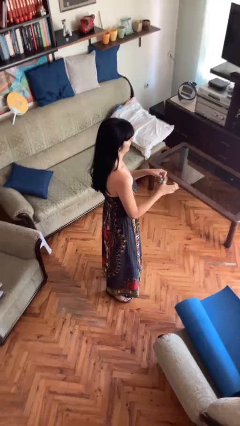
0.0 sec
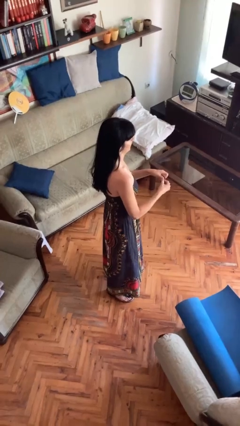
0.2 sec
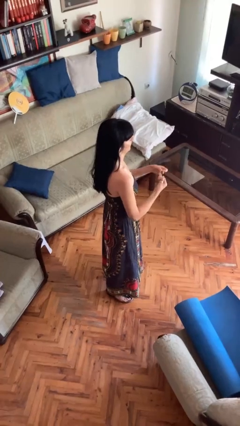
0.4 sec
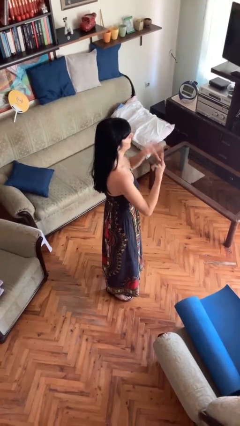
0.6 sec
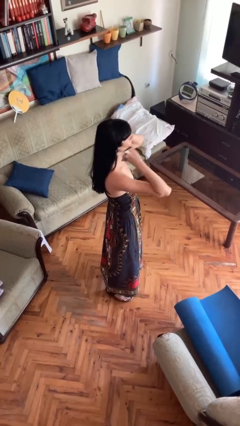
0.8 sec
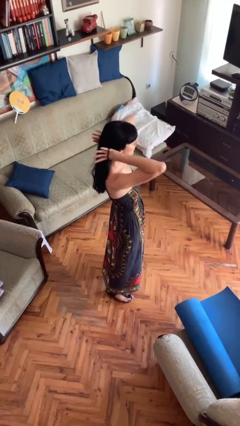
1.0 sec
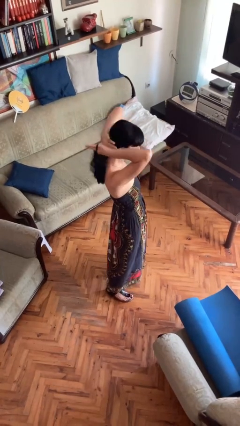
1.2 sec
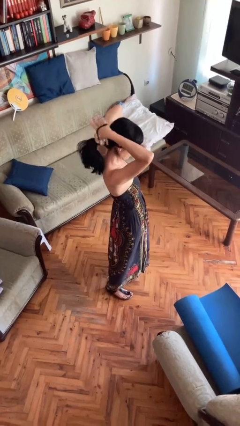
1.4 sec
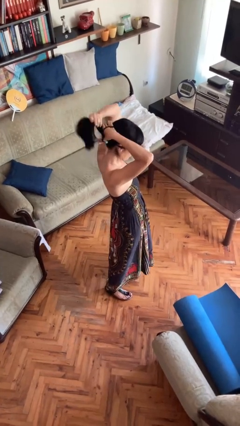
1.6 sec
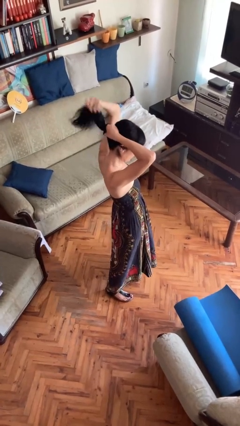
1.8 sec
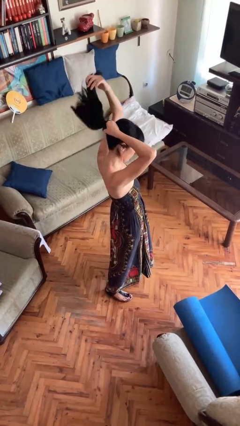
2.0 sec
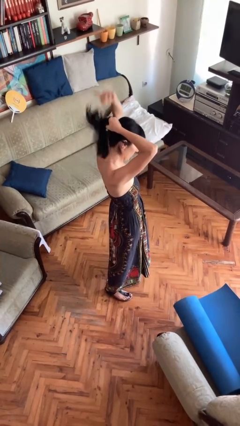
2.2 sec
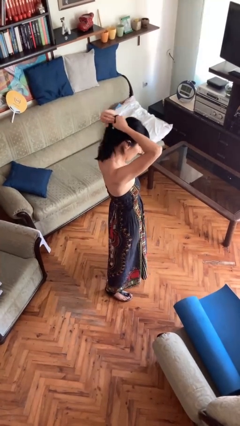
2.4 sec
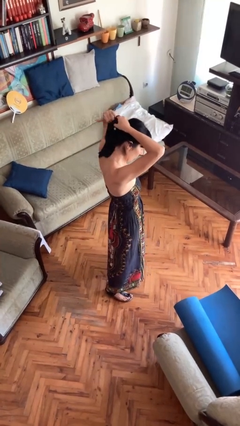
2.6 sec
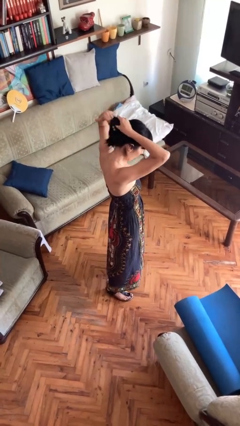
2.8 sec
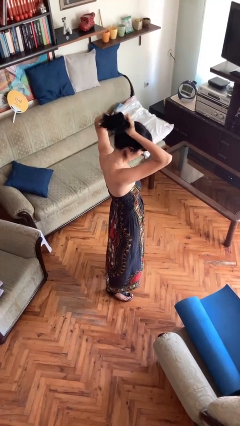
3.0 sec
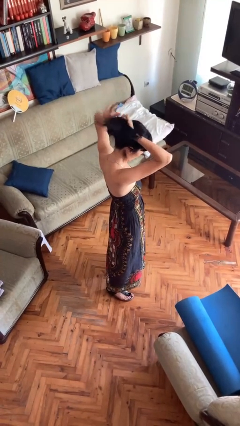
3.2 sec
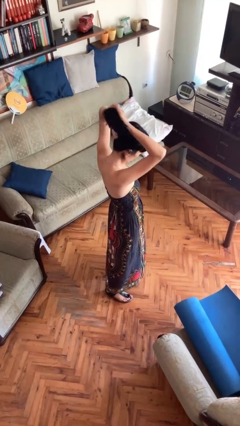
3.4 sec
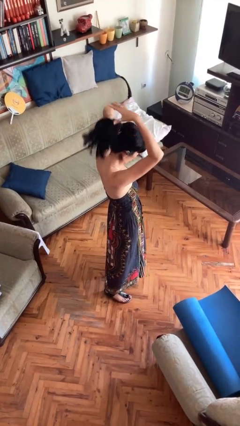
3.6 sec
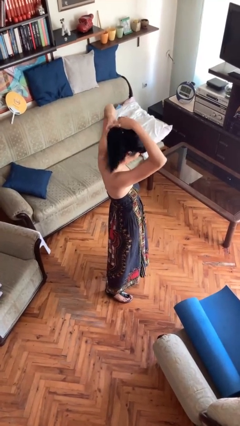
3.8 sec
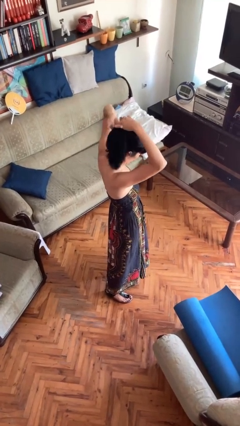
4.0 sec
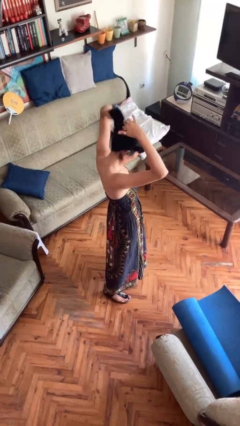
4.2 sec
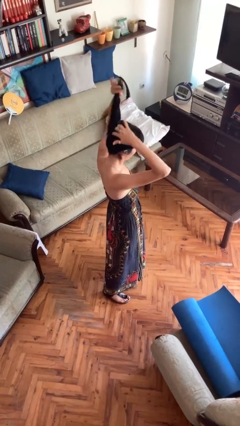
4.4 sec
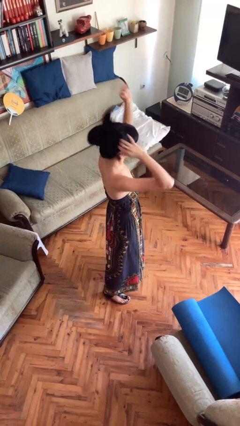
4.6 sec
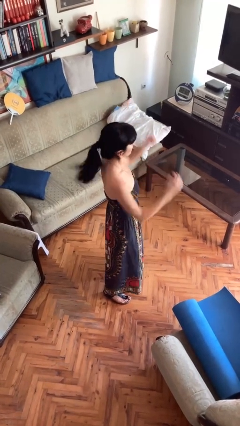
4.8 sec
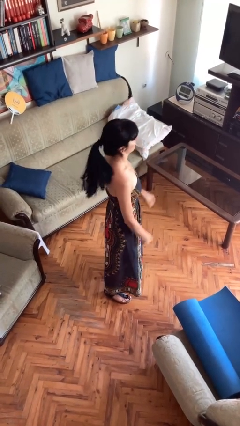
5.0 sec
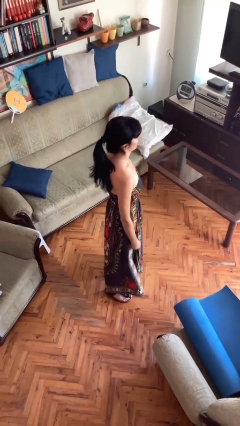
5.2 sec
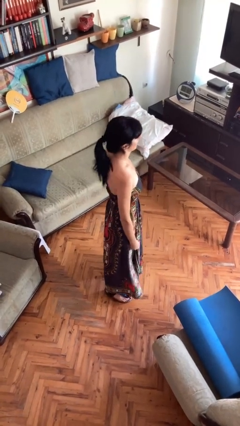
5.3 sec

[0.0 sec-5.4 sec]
person puts hair in ponytail

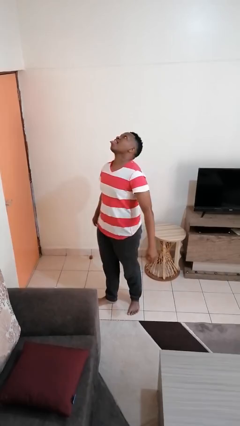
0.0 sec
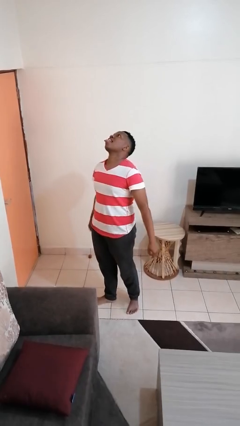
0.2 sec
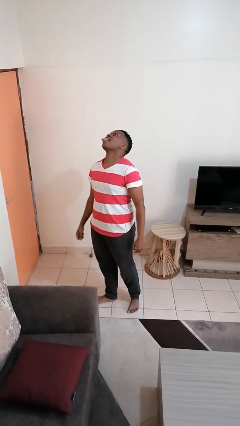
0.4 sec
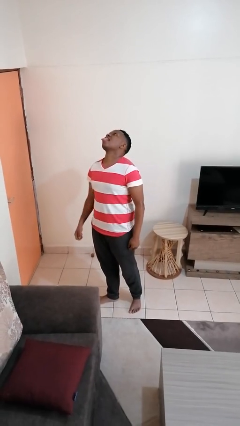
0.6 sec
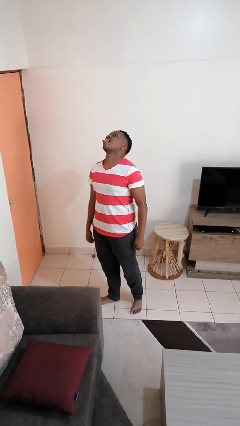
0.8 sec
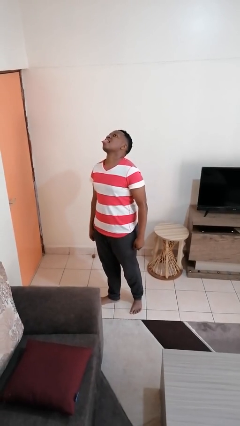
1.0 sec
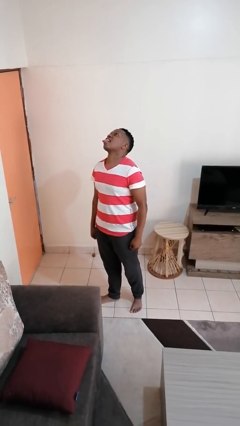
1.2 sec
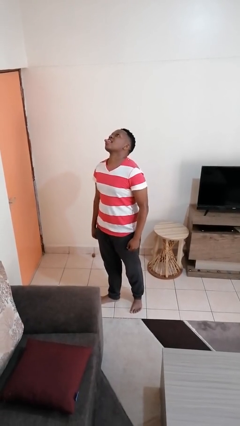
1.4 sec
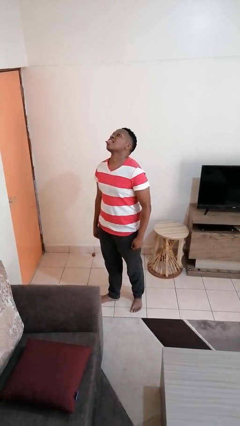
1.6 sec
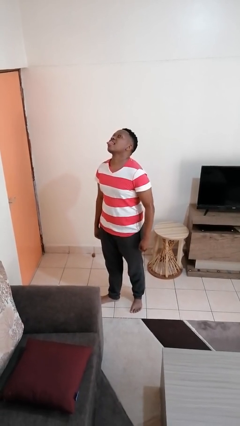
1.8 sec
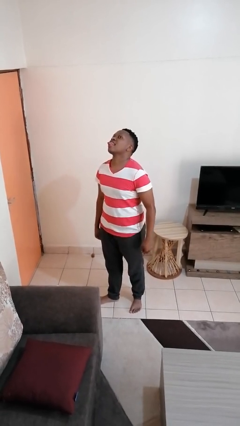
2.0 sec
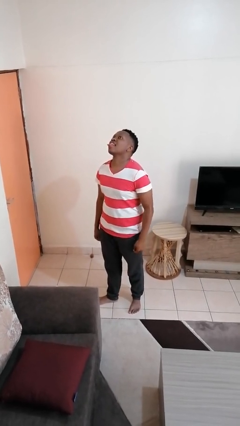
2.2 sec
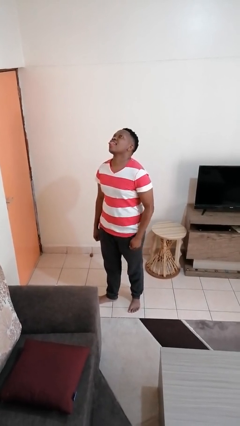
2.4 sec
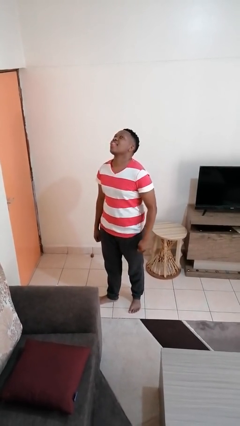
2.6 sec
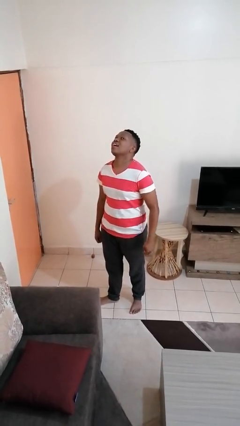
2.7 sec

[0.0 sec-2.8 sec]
person sticks out tongue

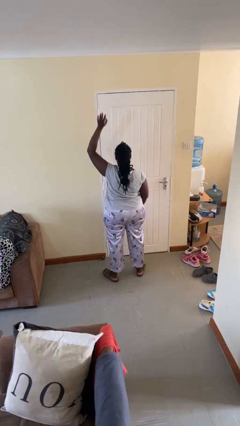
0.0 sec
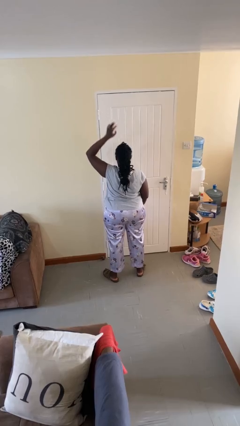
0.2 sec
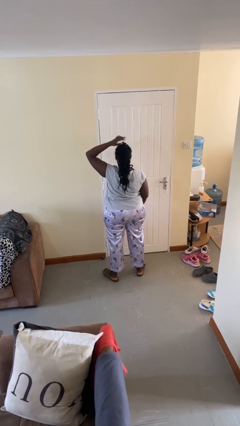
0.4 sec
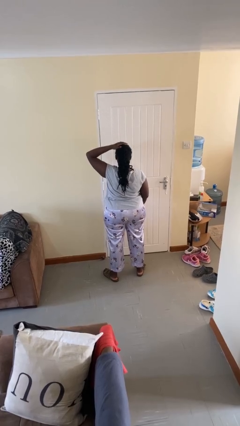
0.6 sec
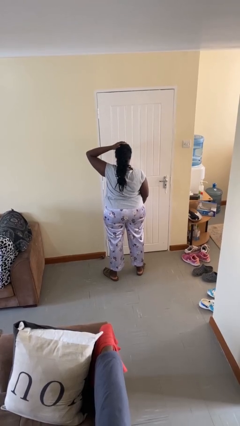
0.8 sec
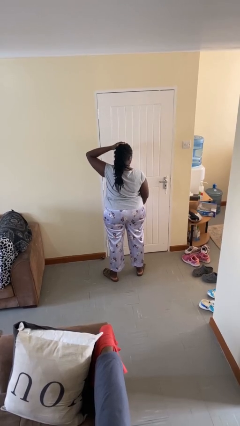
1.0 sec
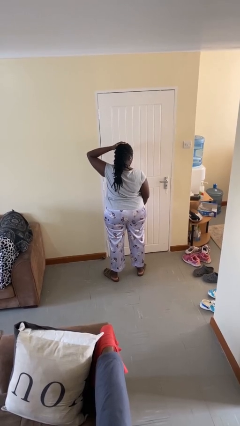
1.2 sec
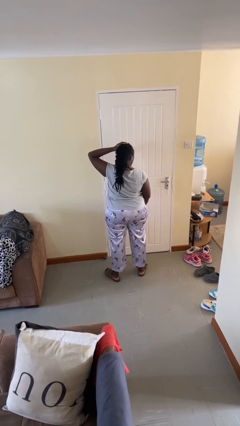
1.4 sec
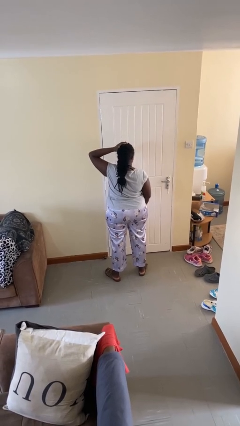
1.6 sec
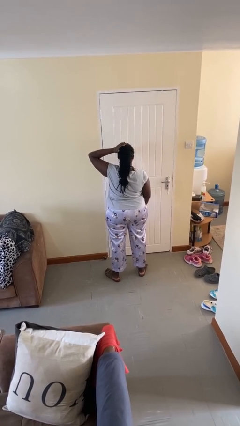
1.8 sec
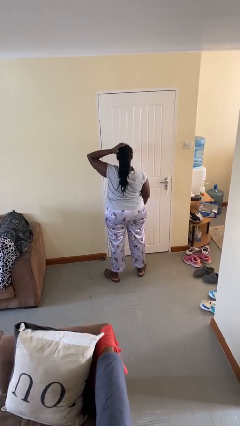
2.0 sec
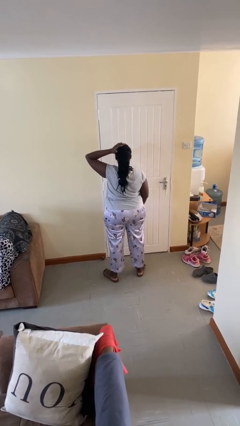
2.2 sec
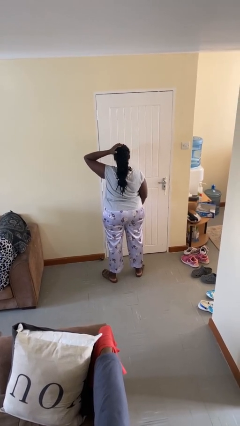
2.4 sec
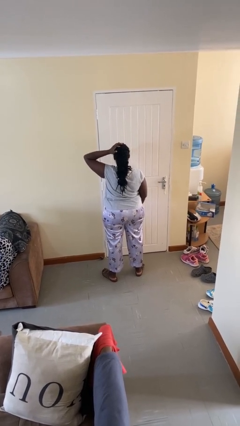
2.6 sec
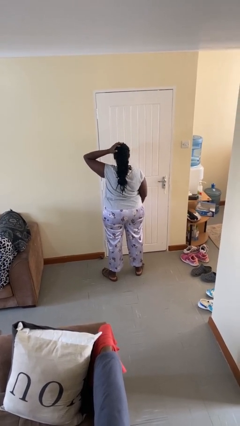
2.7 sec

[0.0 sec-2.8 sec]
person gestures lower hand

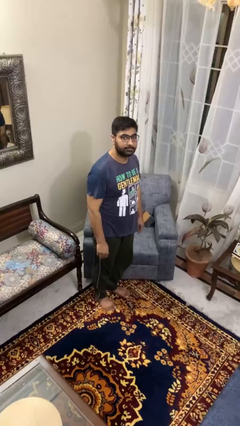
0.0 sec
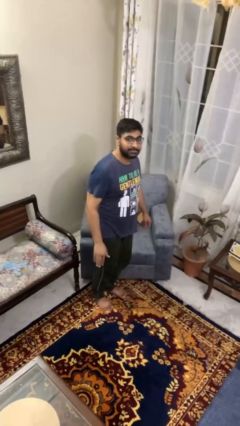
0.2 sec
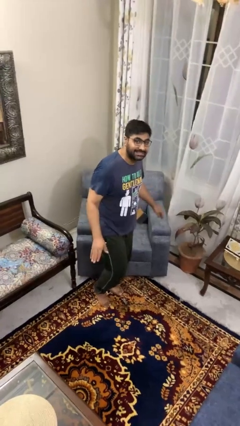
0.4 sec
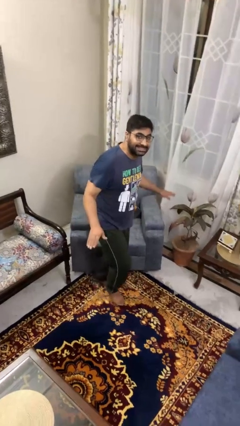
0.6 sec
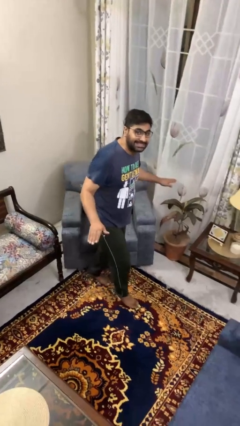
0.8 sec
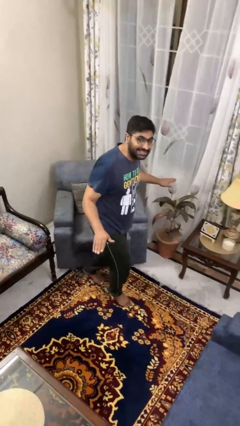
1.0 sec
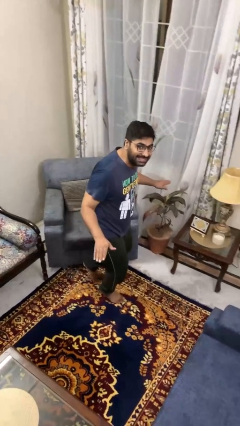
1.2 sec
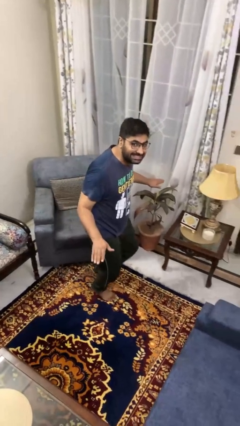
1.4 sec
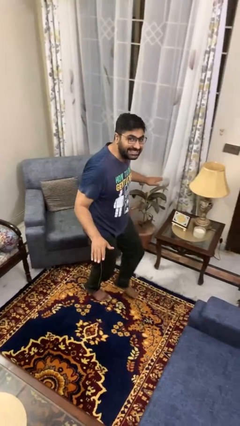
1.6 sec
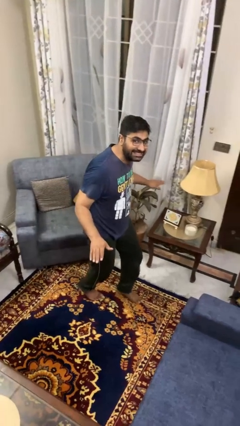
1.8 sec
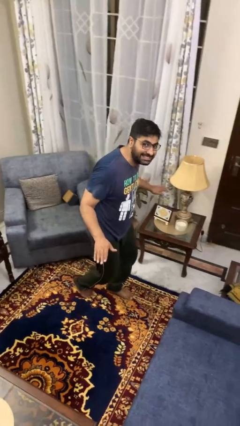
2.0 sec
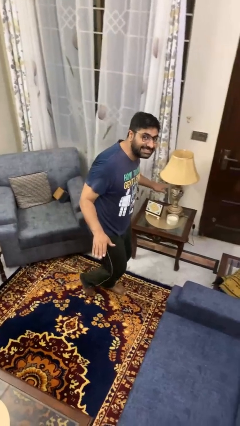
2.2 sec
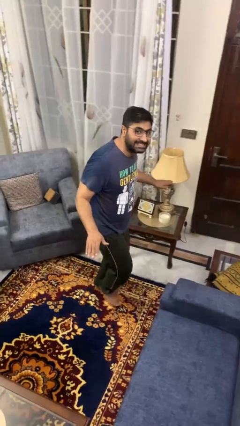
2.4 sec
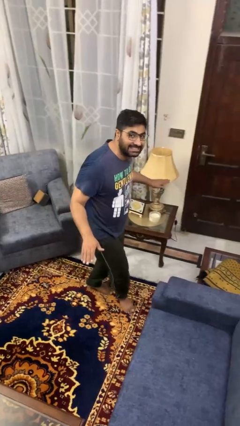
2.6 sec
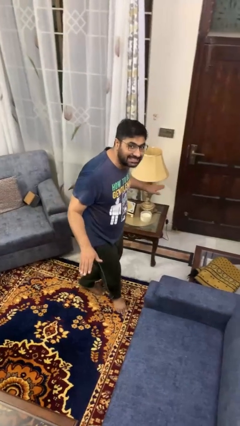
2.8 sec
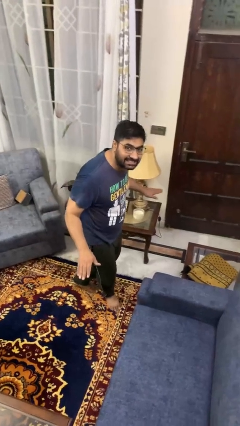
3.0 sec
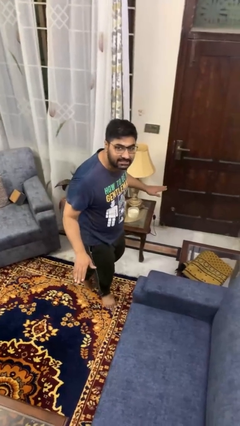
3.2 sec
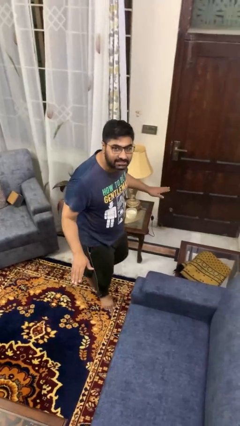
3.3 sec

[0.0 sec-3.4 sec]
person walks tiptoe

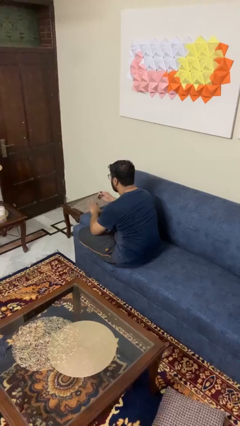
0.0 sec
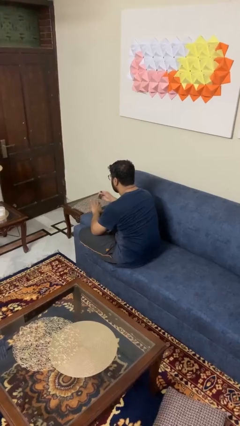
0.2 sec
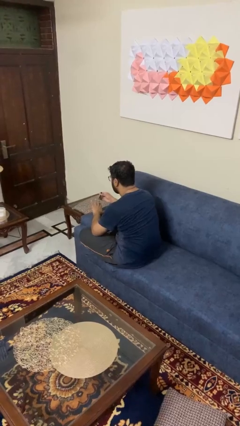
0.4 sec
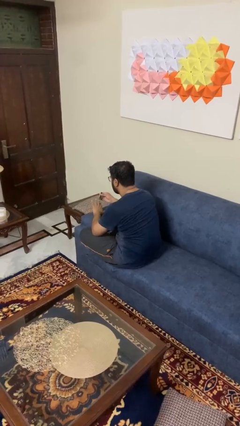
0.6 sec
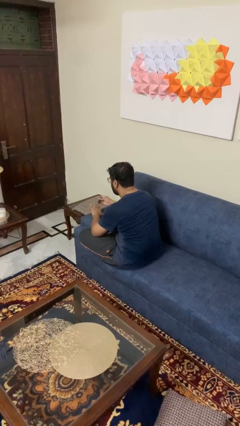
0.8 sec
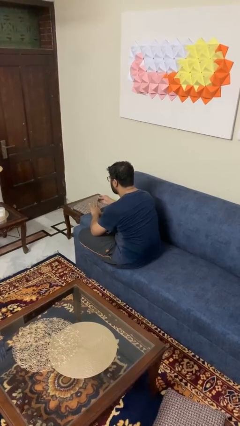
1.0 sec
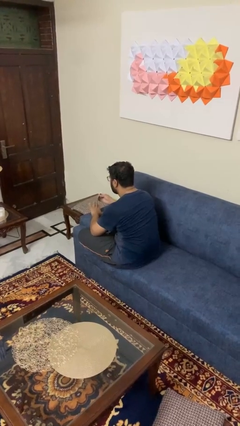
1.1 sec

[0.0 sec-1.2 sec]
person clips fingernails

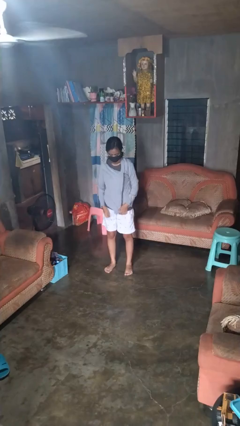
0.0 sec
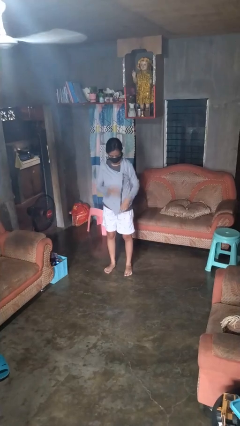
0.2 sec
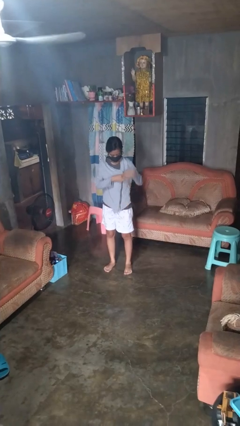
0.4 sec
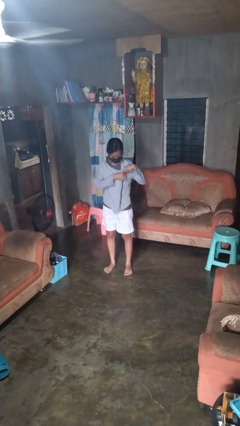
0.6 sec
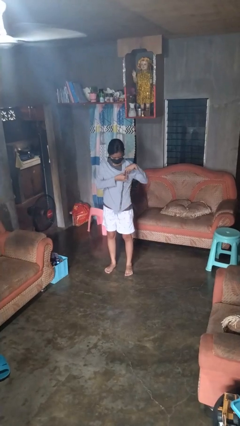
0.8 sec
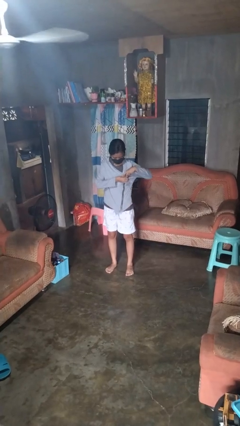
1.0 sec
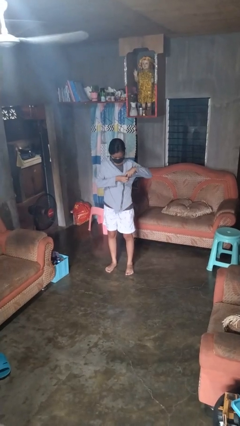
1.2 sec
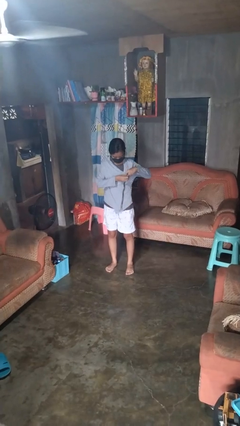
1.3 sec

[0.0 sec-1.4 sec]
person unzips jacket

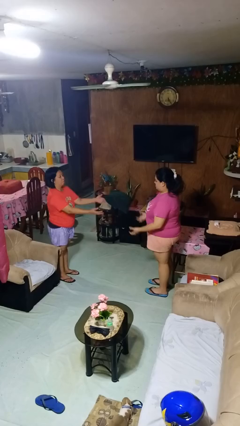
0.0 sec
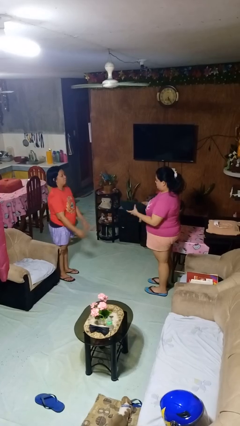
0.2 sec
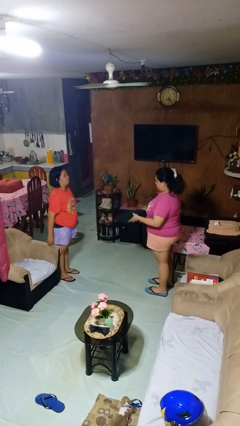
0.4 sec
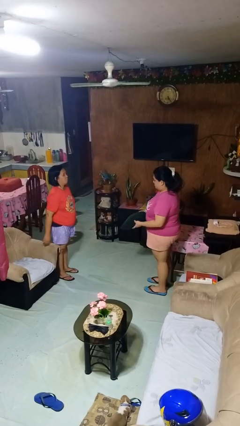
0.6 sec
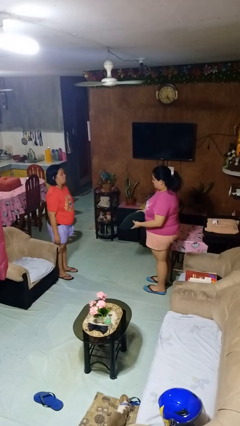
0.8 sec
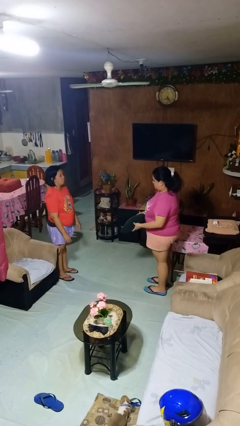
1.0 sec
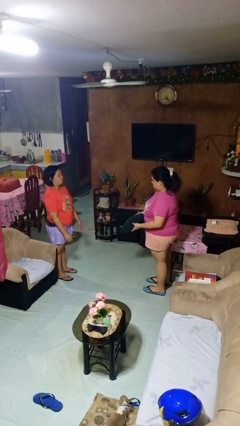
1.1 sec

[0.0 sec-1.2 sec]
person catches object from person
